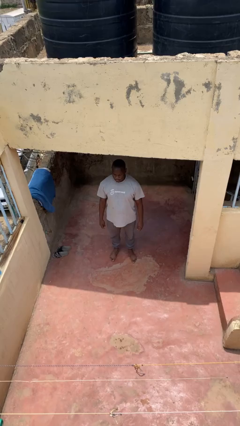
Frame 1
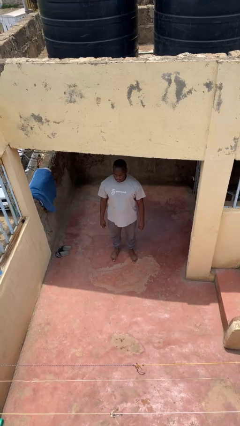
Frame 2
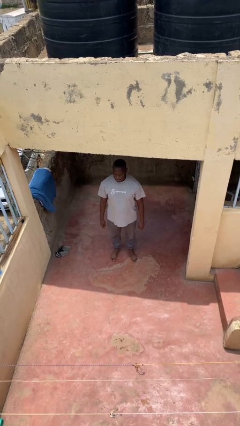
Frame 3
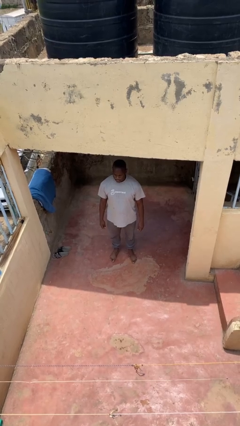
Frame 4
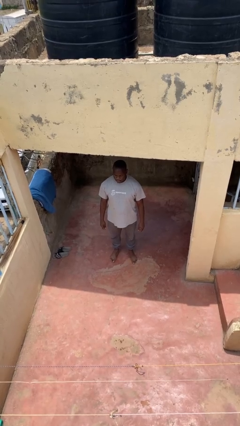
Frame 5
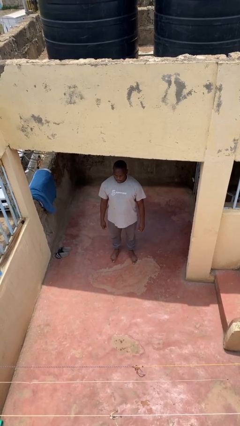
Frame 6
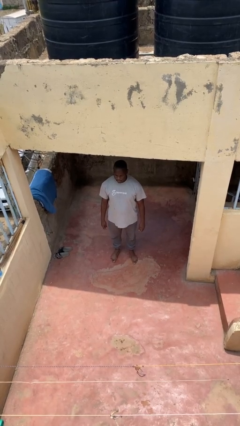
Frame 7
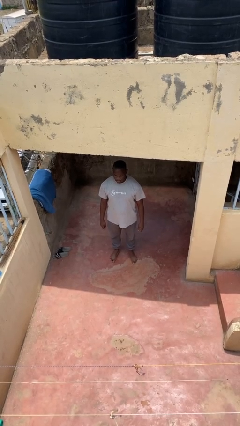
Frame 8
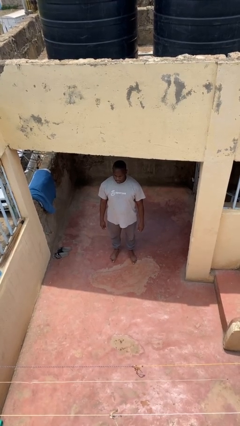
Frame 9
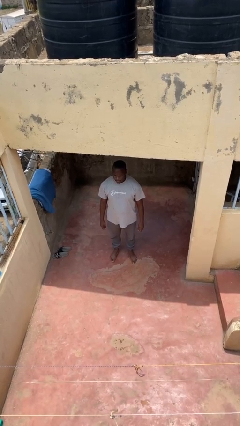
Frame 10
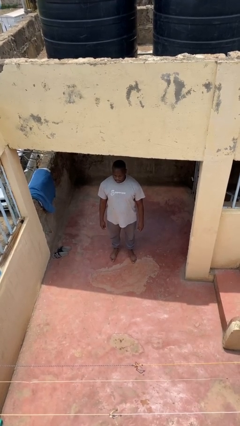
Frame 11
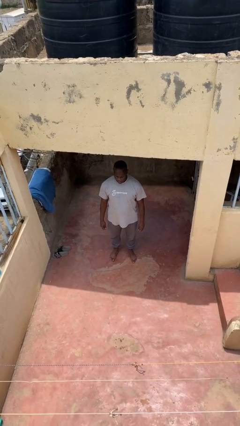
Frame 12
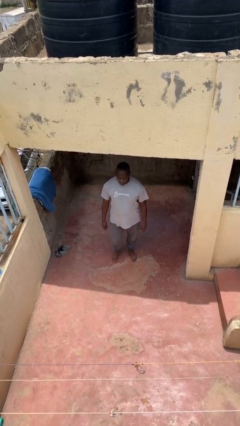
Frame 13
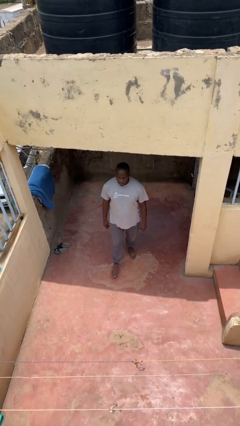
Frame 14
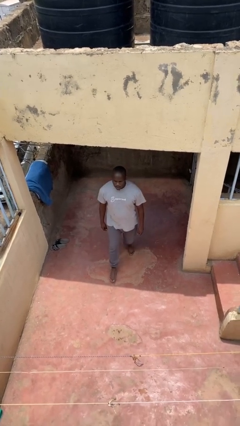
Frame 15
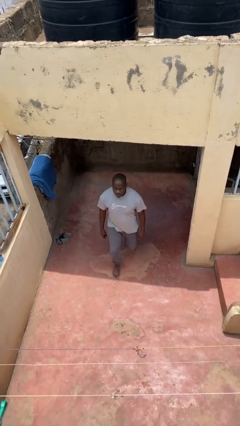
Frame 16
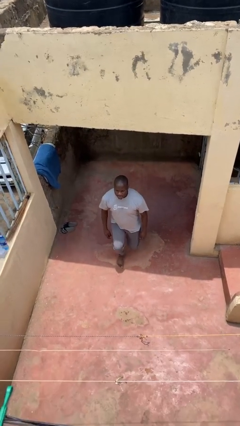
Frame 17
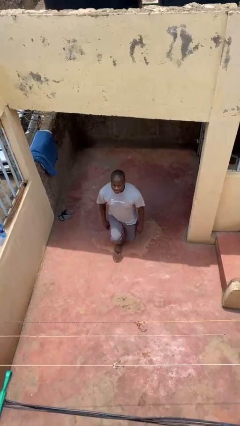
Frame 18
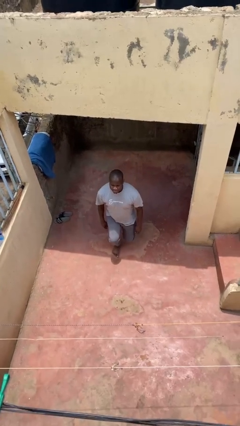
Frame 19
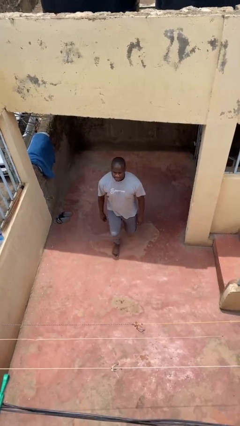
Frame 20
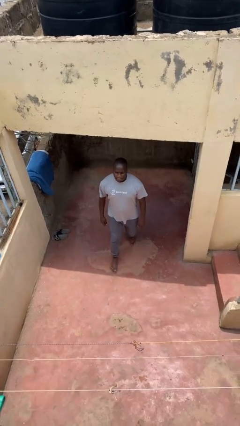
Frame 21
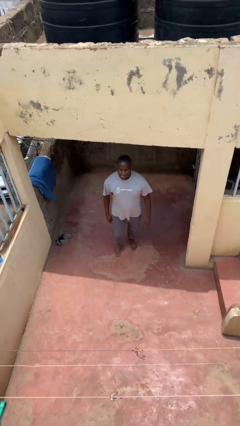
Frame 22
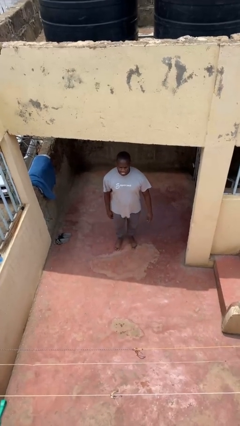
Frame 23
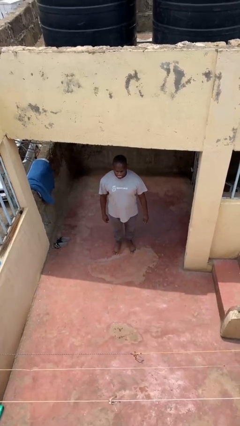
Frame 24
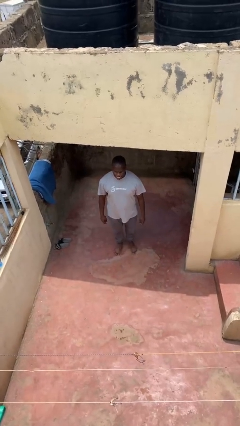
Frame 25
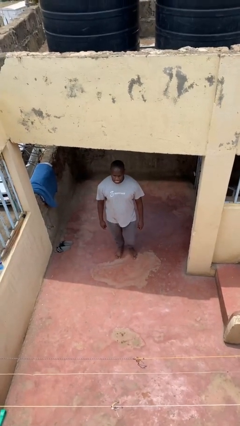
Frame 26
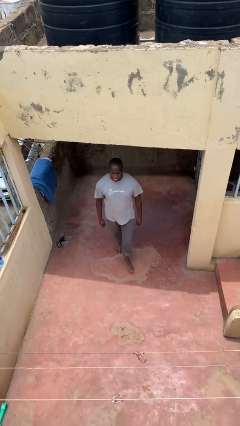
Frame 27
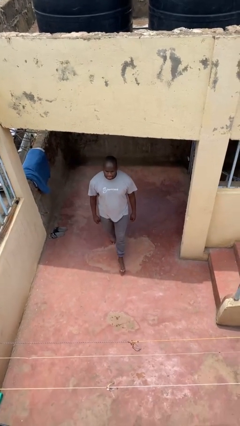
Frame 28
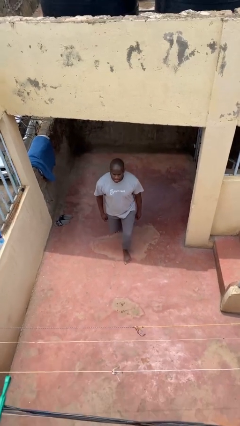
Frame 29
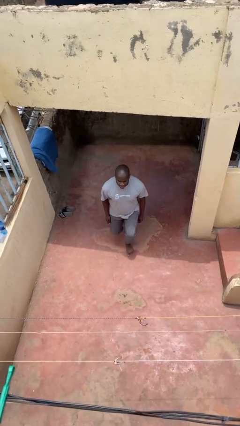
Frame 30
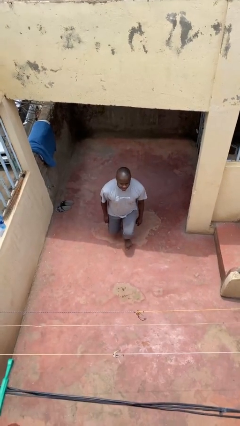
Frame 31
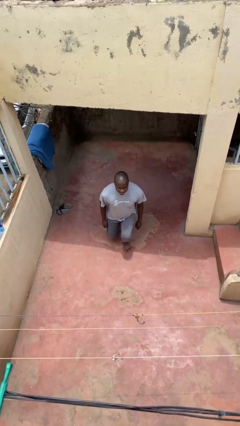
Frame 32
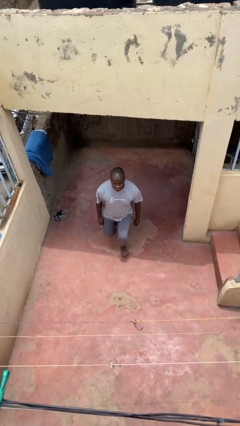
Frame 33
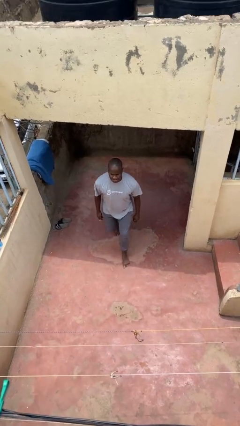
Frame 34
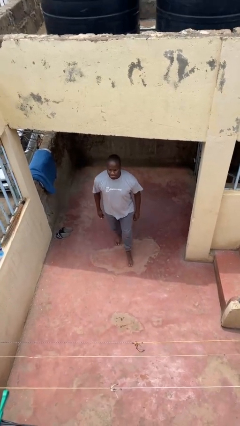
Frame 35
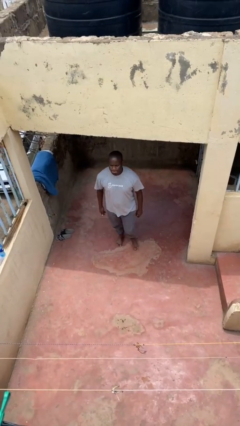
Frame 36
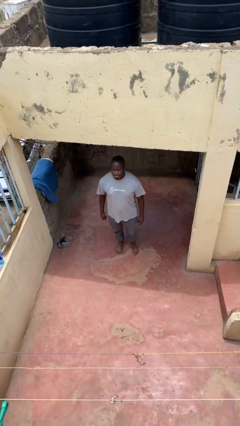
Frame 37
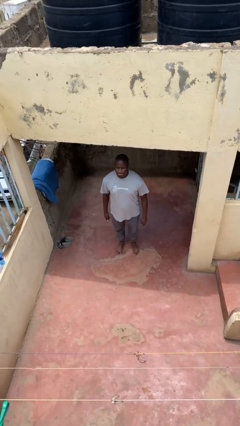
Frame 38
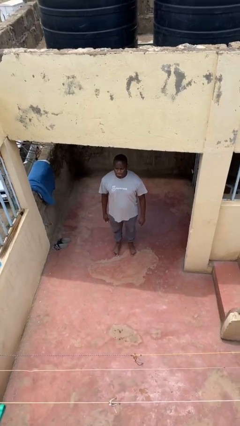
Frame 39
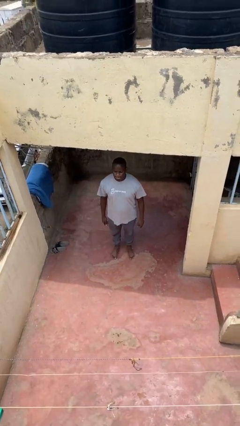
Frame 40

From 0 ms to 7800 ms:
person exercises with lunges

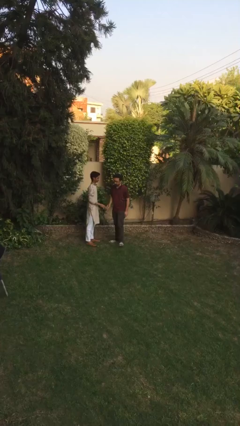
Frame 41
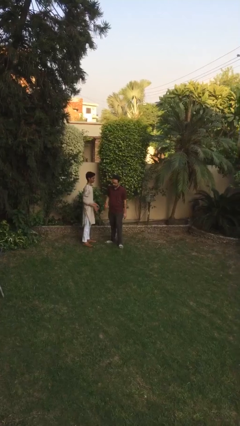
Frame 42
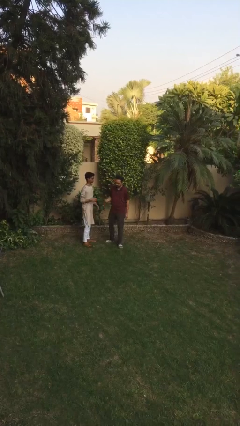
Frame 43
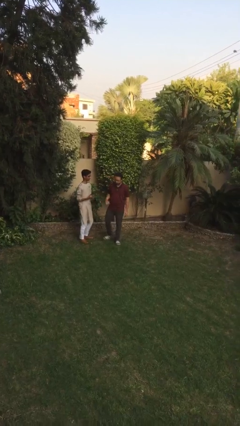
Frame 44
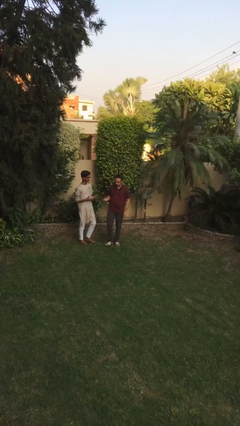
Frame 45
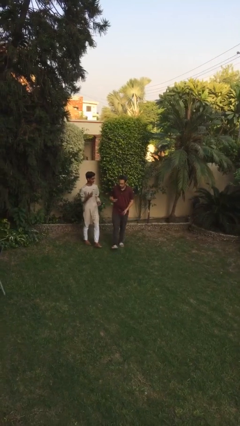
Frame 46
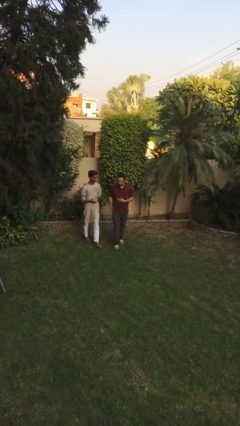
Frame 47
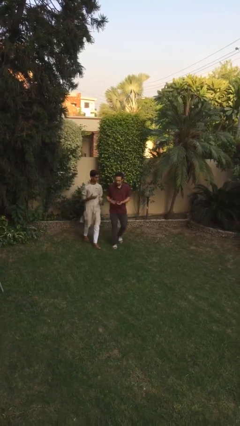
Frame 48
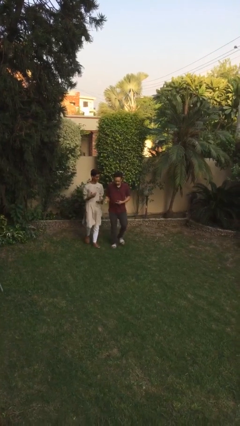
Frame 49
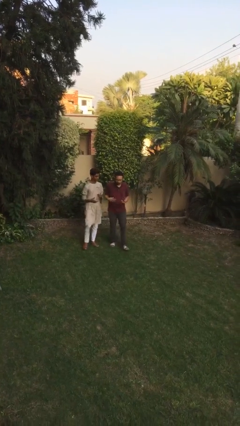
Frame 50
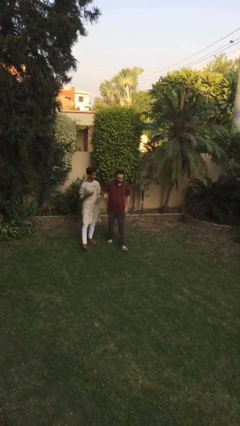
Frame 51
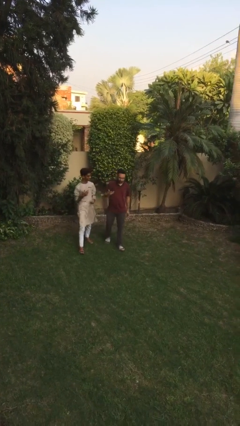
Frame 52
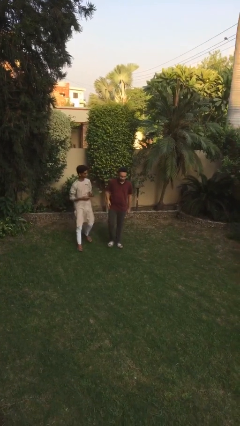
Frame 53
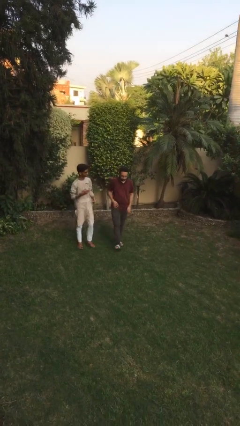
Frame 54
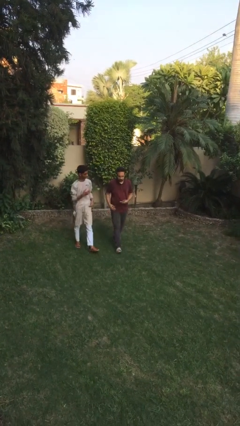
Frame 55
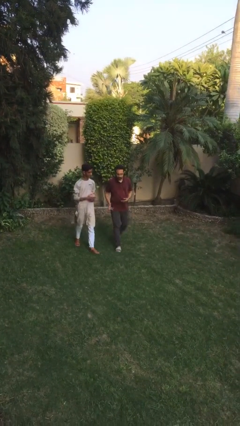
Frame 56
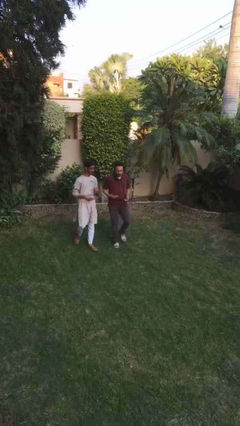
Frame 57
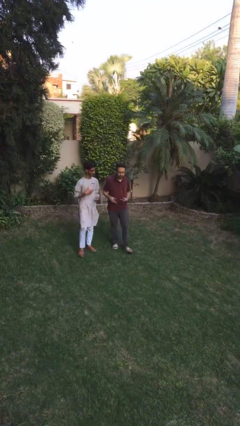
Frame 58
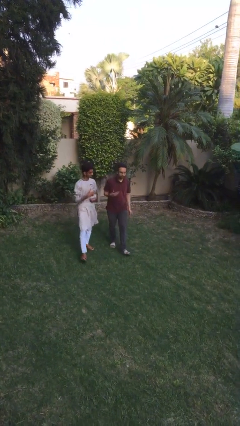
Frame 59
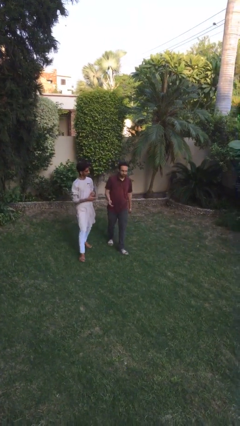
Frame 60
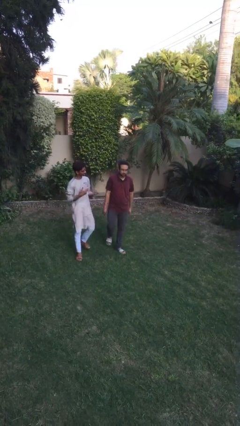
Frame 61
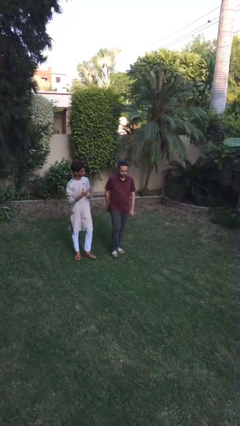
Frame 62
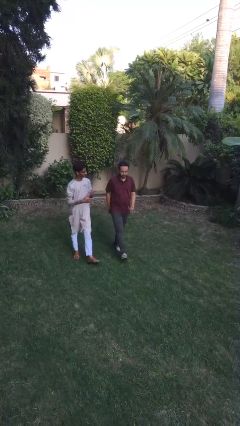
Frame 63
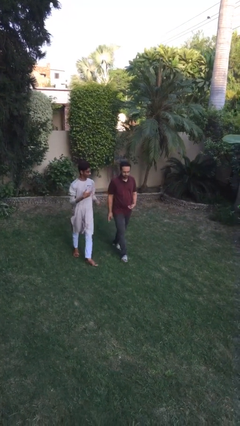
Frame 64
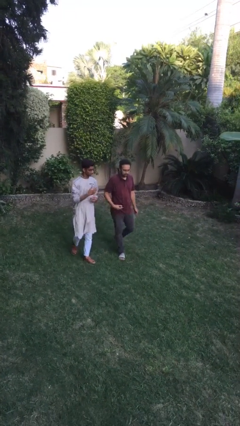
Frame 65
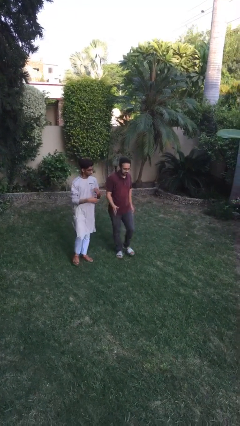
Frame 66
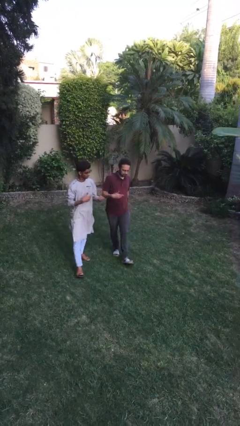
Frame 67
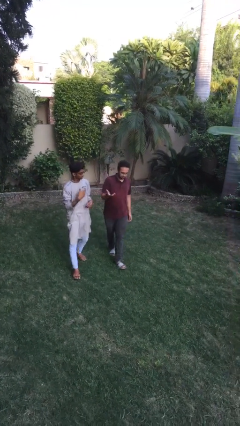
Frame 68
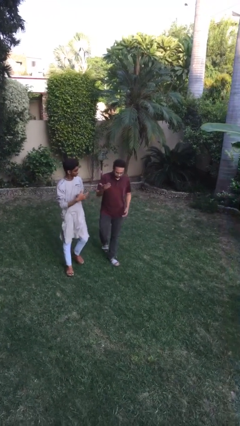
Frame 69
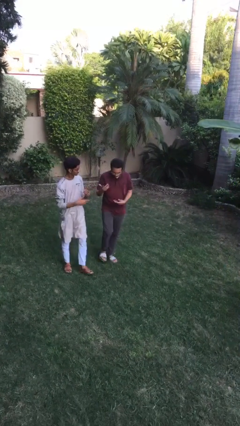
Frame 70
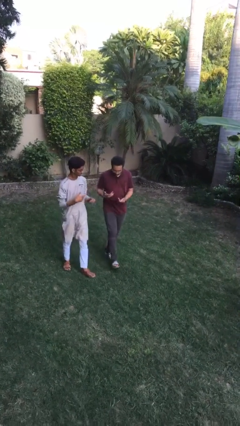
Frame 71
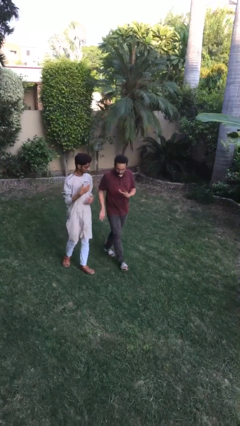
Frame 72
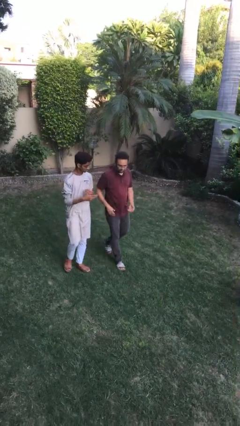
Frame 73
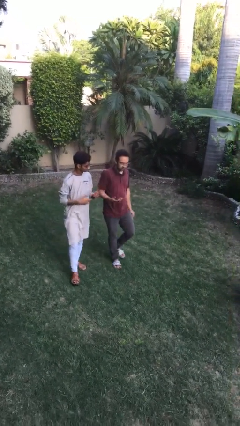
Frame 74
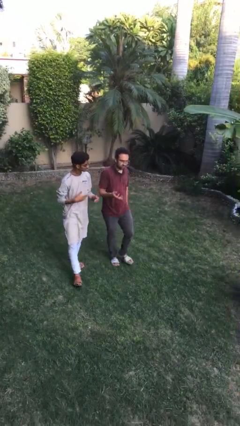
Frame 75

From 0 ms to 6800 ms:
person talks to person

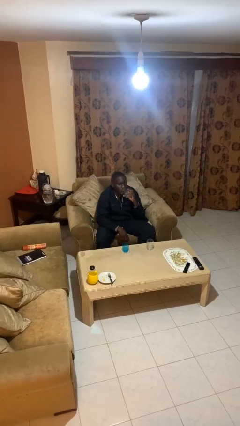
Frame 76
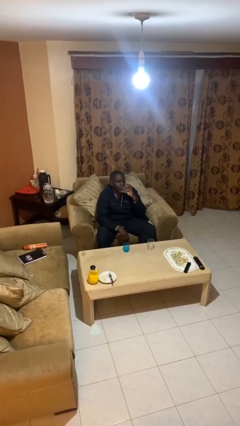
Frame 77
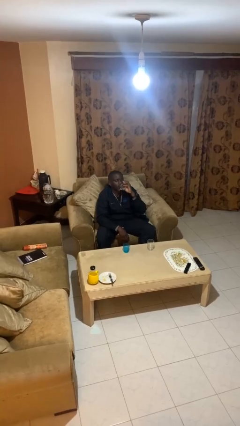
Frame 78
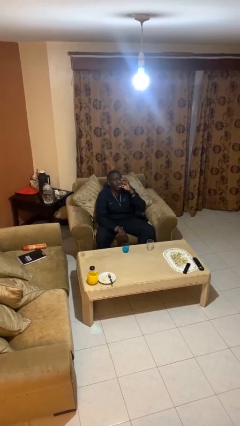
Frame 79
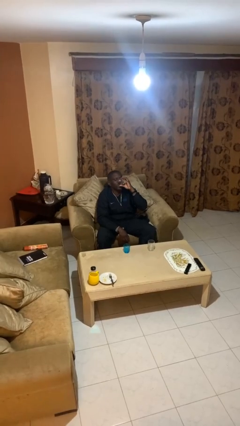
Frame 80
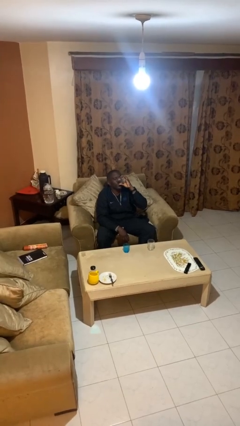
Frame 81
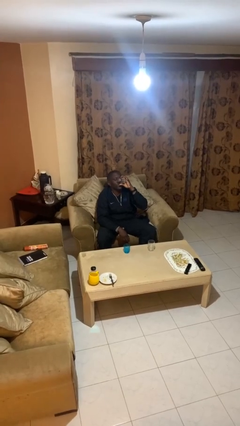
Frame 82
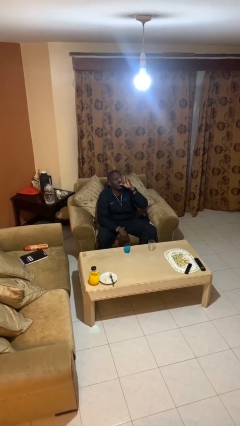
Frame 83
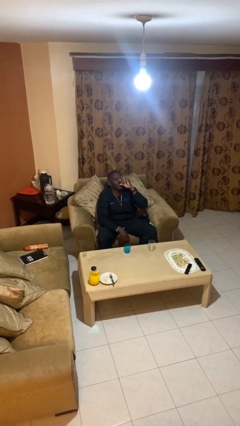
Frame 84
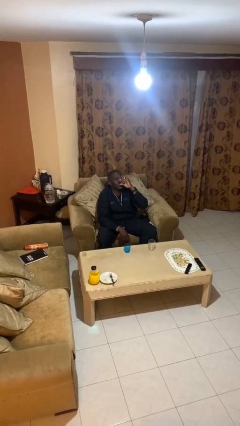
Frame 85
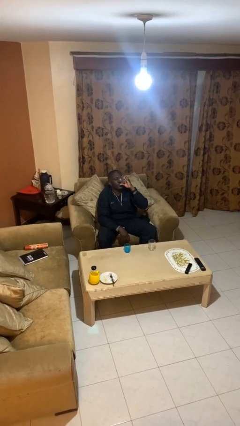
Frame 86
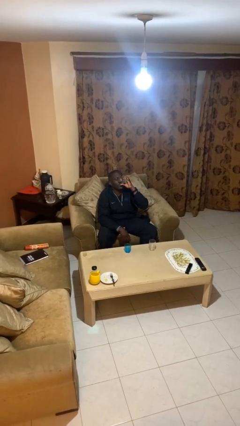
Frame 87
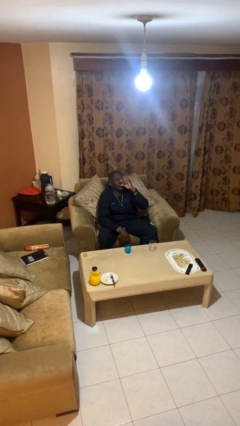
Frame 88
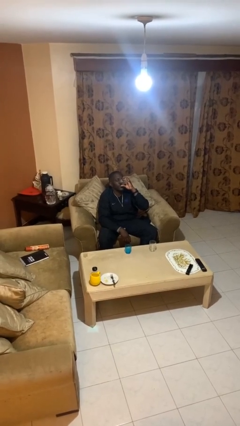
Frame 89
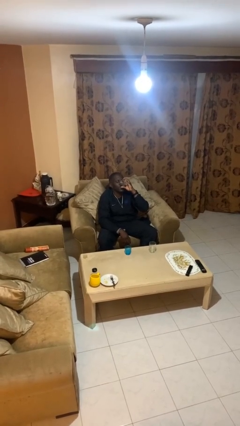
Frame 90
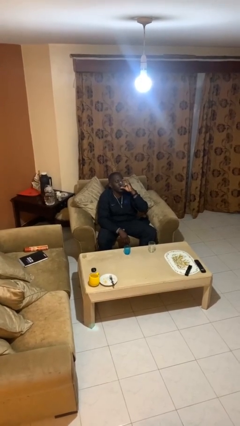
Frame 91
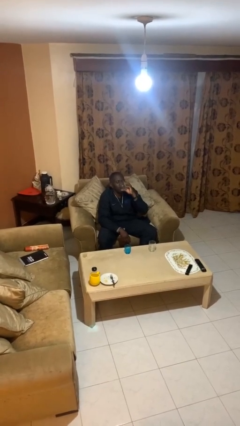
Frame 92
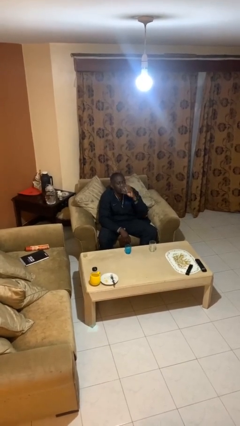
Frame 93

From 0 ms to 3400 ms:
person drinks from shotglass
